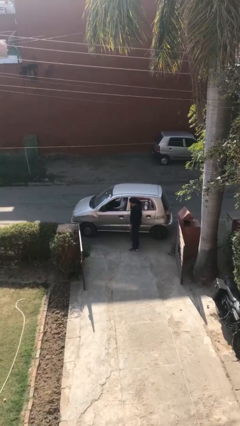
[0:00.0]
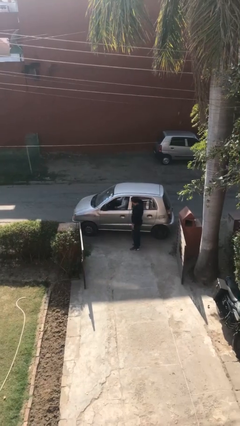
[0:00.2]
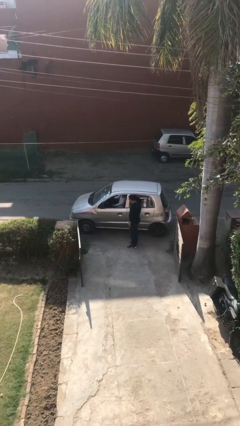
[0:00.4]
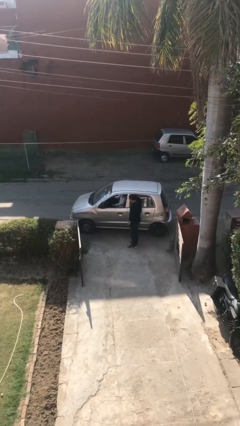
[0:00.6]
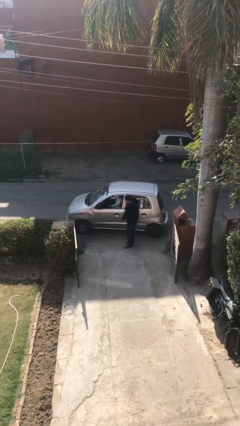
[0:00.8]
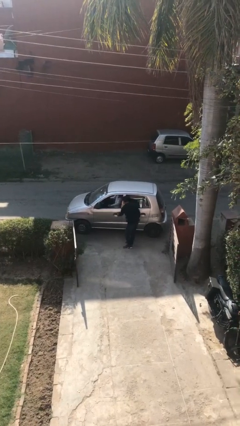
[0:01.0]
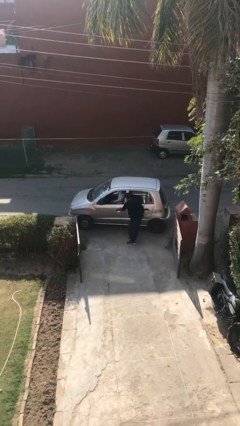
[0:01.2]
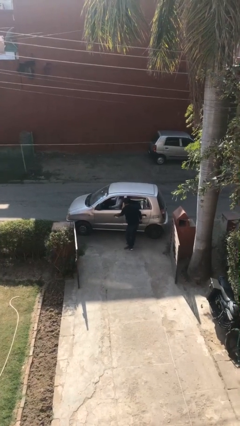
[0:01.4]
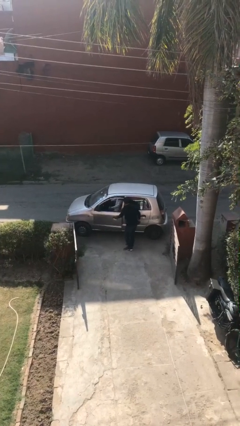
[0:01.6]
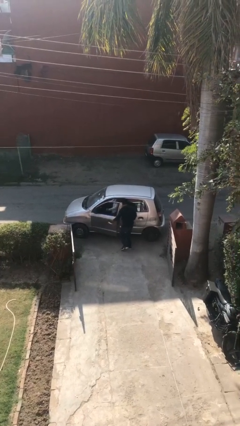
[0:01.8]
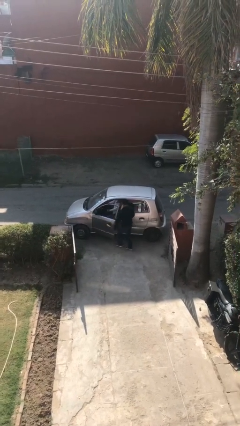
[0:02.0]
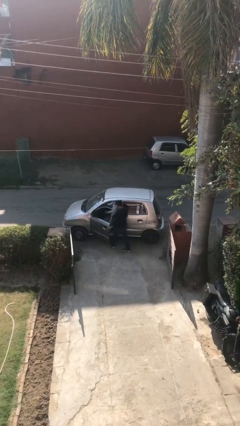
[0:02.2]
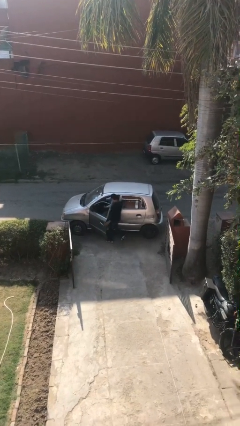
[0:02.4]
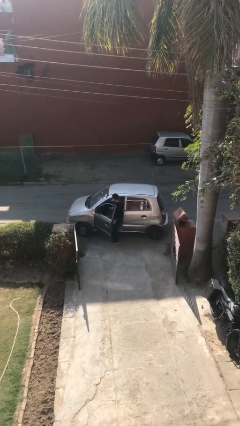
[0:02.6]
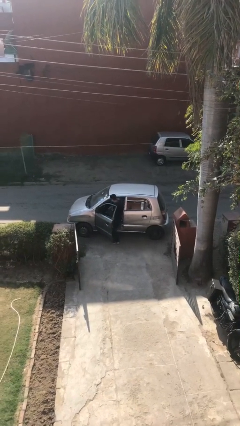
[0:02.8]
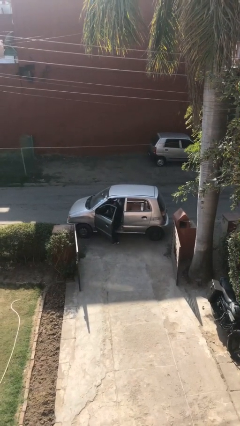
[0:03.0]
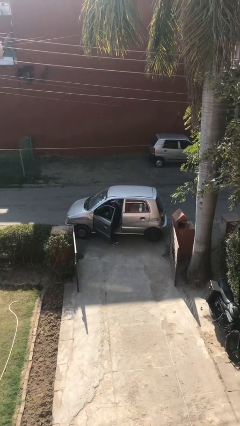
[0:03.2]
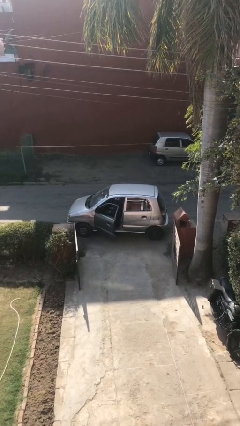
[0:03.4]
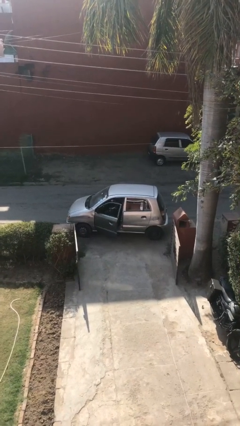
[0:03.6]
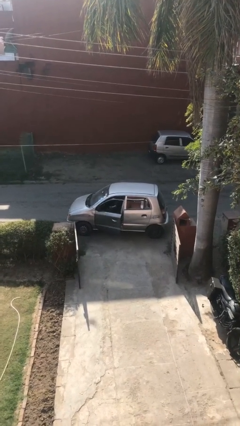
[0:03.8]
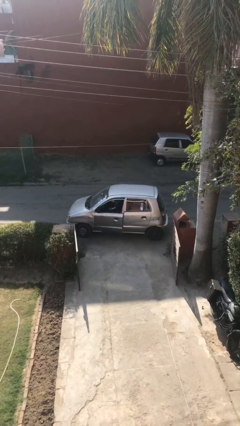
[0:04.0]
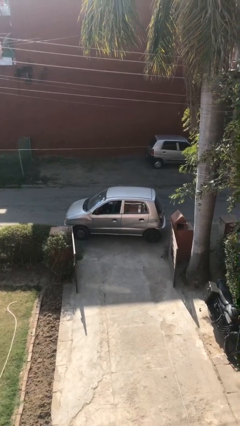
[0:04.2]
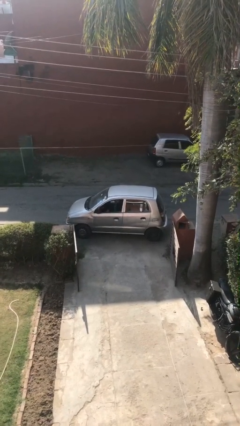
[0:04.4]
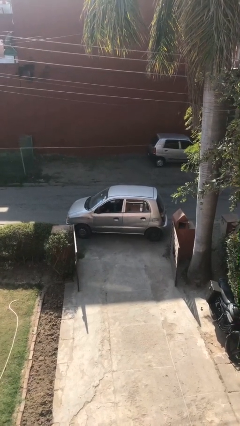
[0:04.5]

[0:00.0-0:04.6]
car picks up person

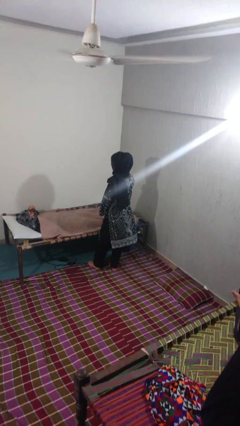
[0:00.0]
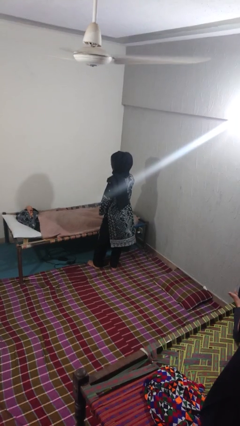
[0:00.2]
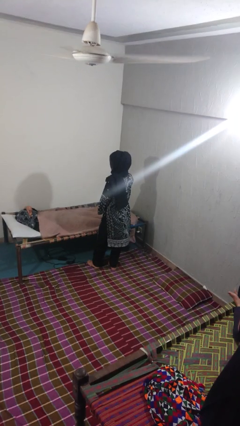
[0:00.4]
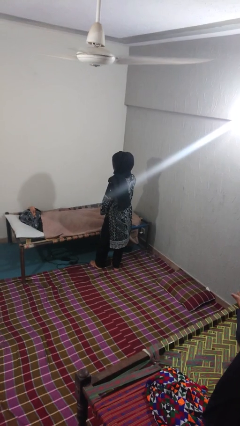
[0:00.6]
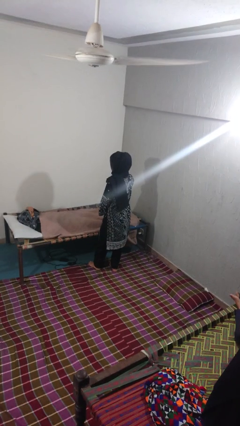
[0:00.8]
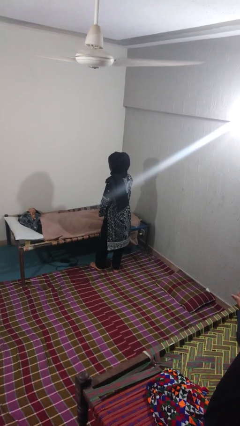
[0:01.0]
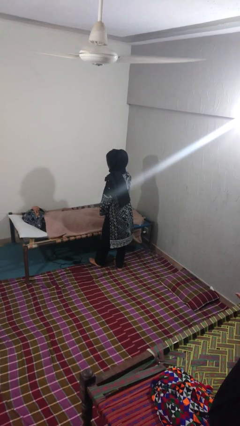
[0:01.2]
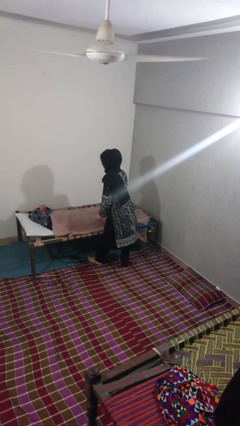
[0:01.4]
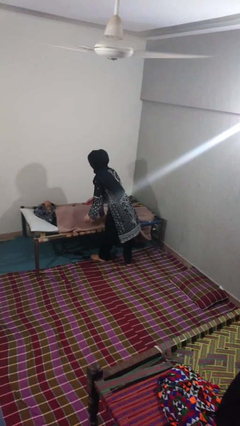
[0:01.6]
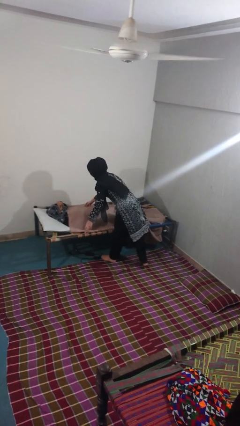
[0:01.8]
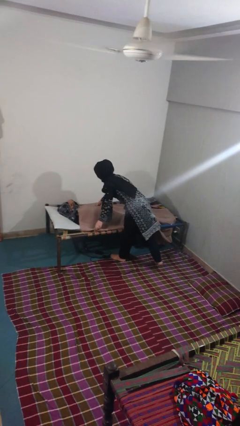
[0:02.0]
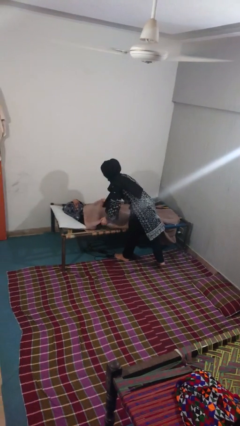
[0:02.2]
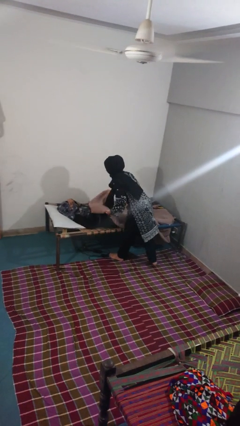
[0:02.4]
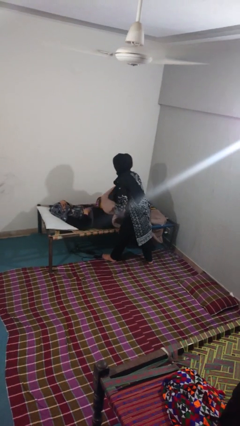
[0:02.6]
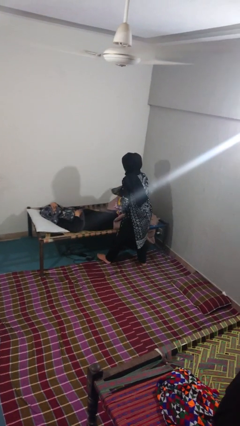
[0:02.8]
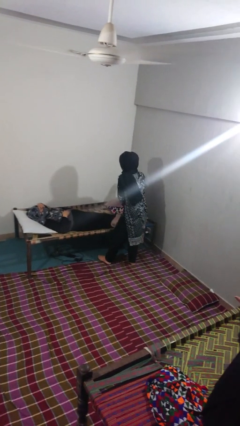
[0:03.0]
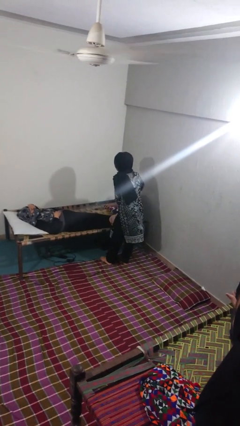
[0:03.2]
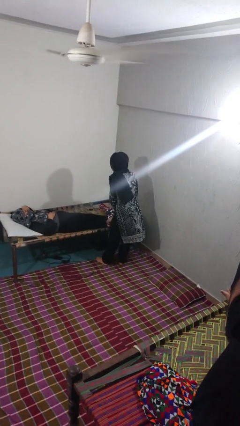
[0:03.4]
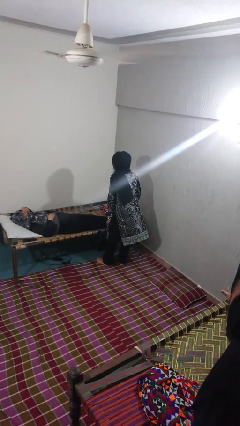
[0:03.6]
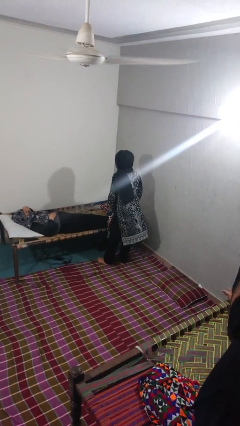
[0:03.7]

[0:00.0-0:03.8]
person uncovers friend with blanket

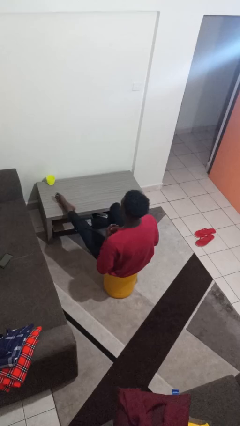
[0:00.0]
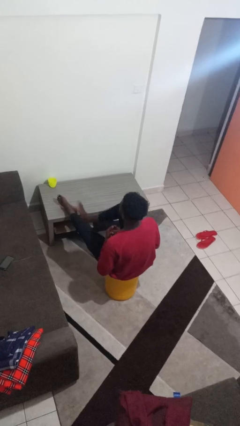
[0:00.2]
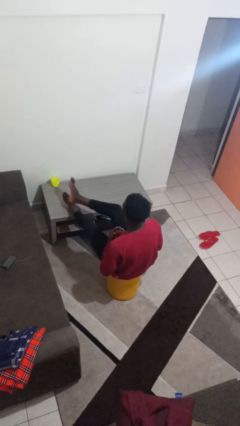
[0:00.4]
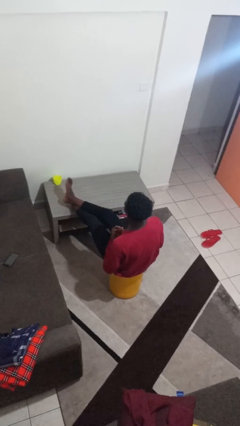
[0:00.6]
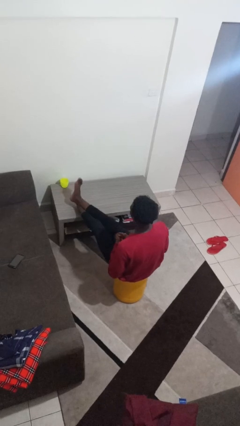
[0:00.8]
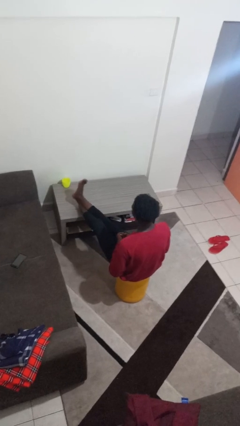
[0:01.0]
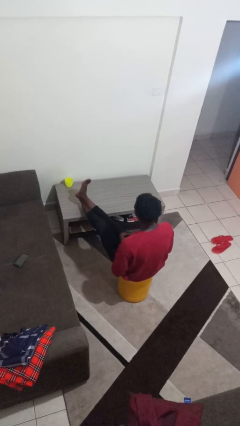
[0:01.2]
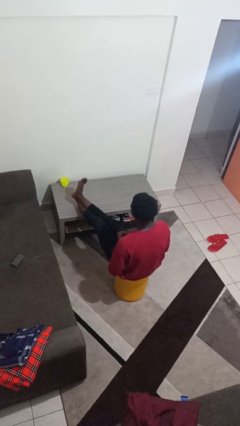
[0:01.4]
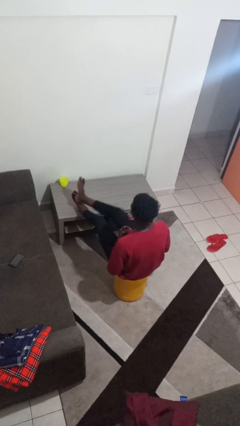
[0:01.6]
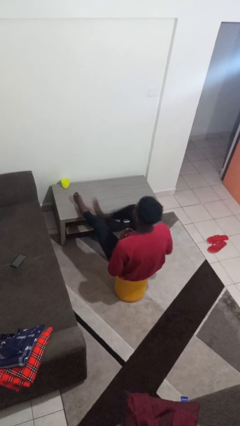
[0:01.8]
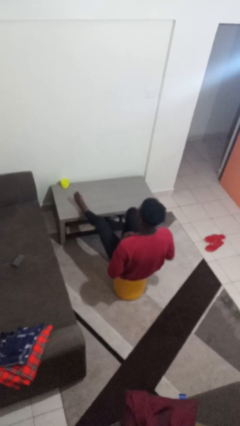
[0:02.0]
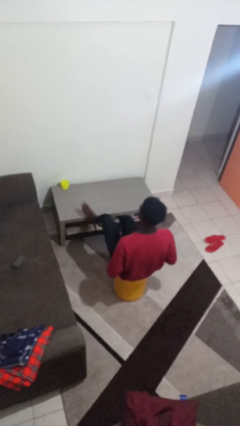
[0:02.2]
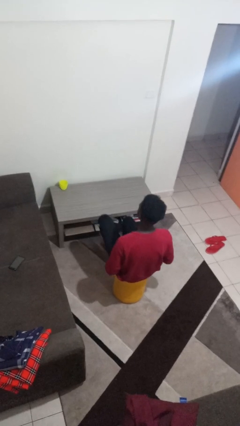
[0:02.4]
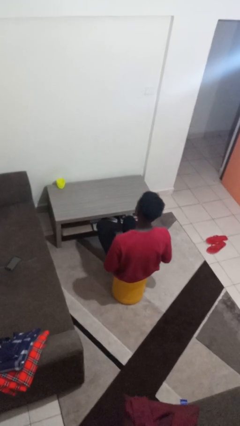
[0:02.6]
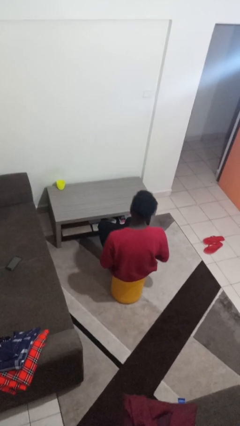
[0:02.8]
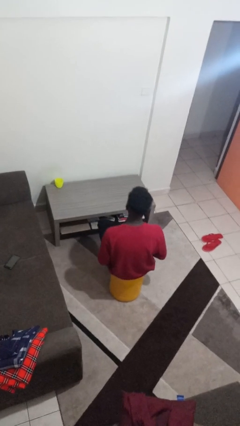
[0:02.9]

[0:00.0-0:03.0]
person puts feet up

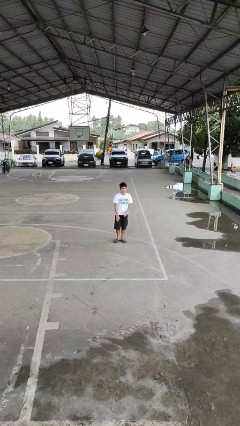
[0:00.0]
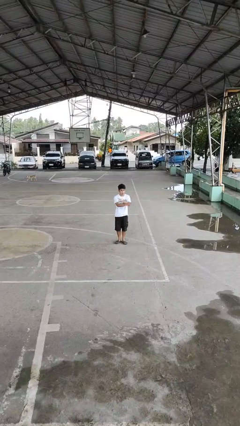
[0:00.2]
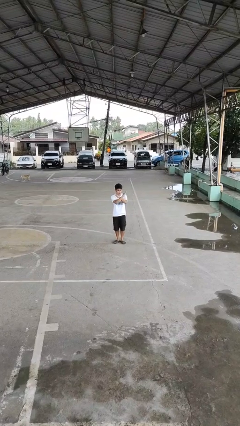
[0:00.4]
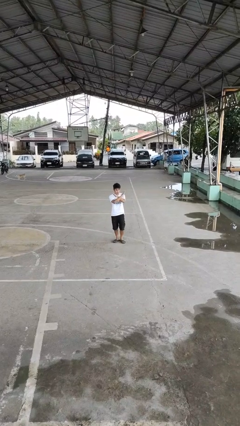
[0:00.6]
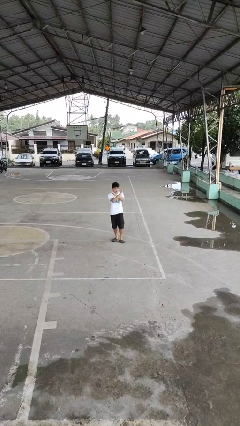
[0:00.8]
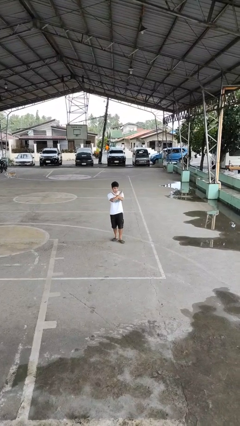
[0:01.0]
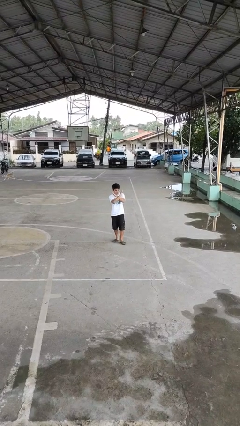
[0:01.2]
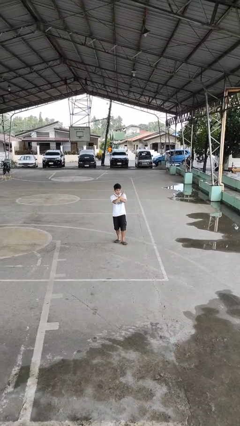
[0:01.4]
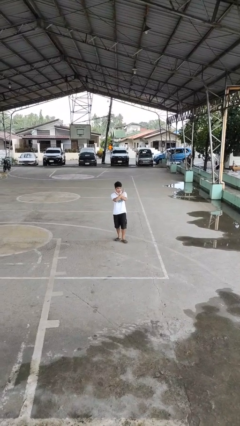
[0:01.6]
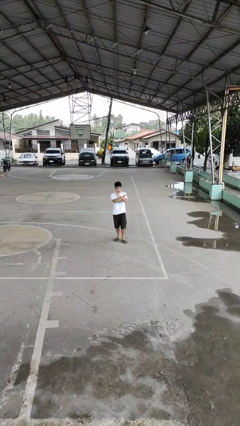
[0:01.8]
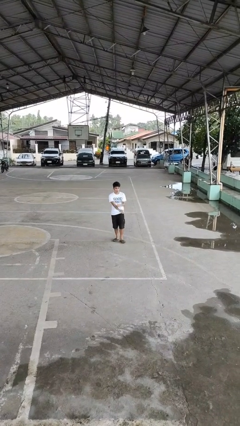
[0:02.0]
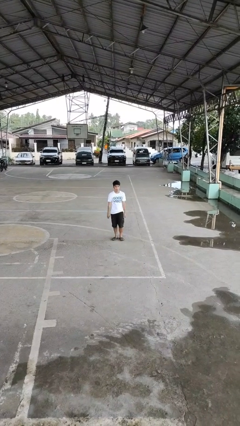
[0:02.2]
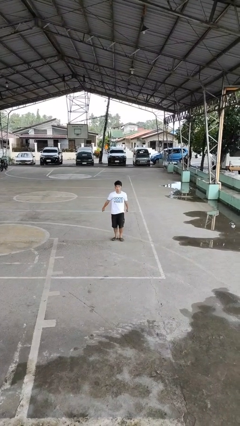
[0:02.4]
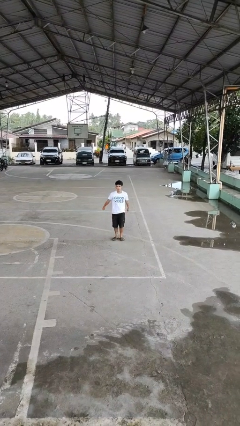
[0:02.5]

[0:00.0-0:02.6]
person gestures arms x

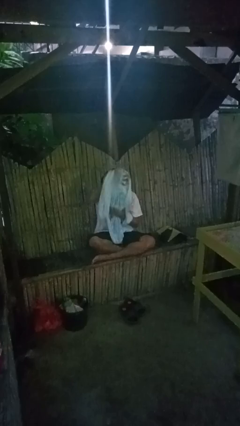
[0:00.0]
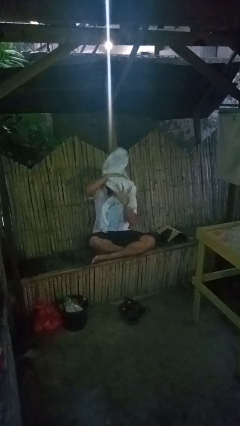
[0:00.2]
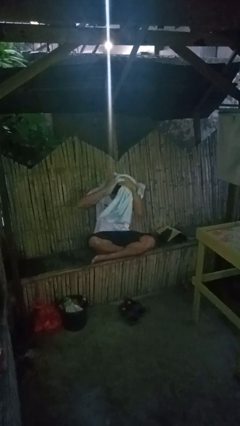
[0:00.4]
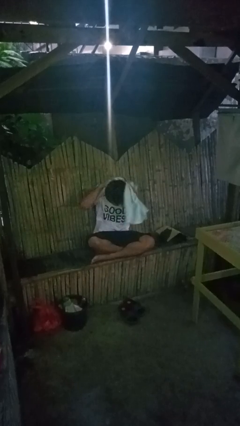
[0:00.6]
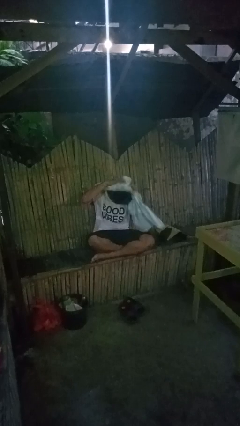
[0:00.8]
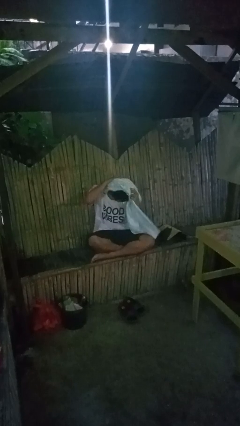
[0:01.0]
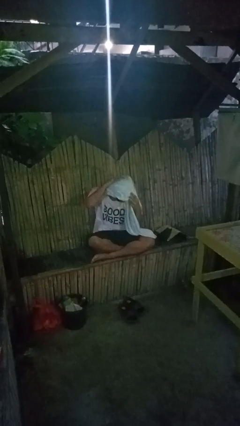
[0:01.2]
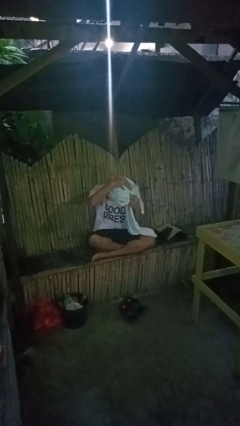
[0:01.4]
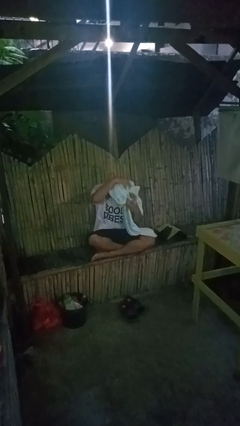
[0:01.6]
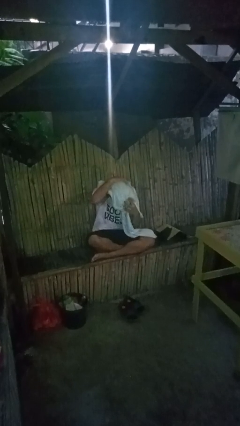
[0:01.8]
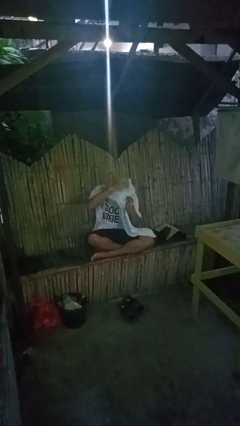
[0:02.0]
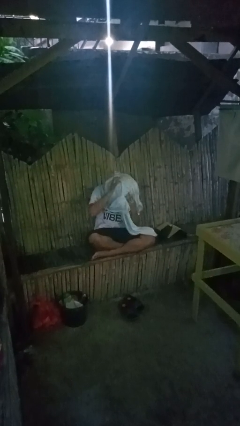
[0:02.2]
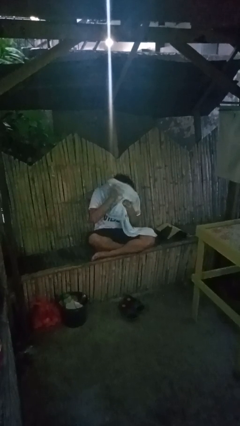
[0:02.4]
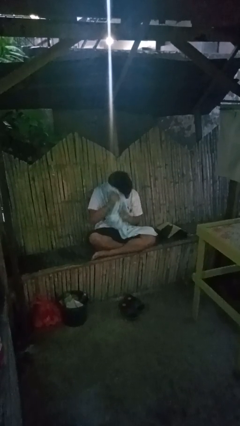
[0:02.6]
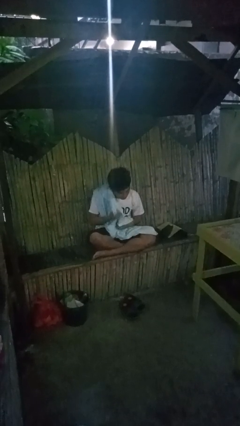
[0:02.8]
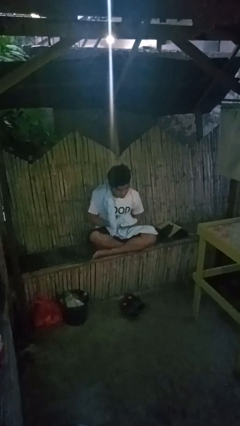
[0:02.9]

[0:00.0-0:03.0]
person dries hair with towel

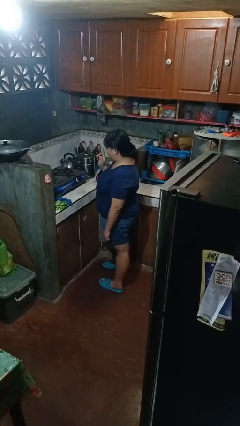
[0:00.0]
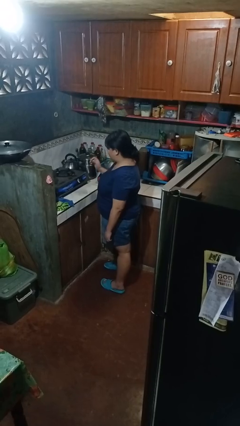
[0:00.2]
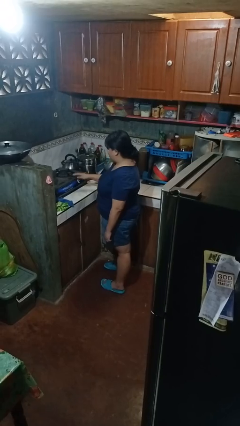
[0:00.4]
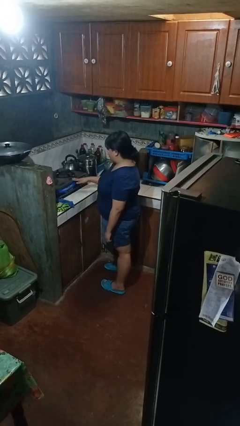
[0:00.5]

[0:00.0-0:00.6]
person burns hand
